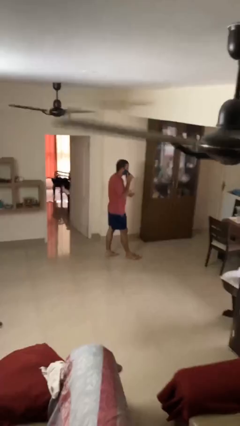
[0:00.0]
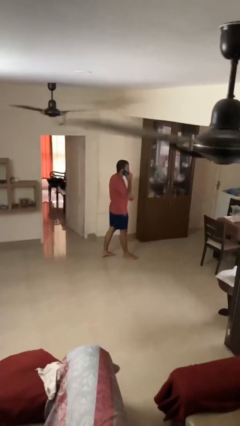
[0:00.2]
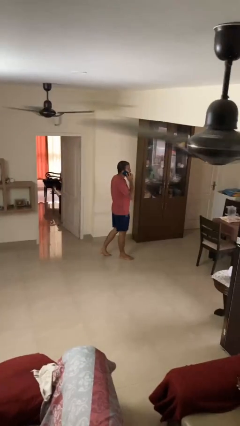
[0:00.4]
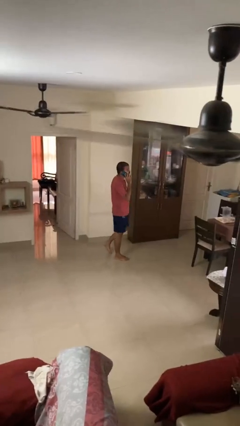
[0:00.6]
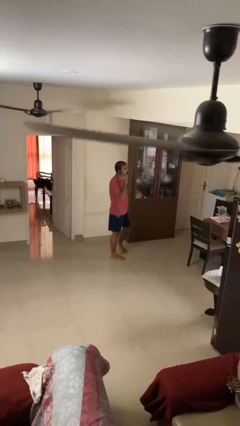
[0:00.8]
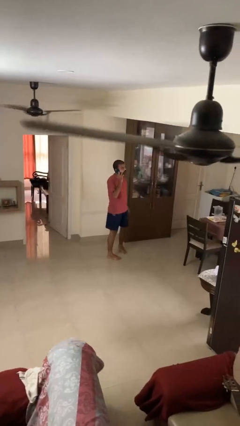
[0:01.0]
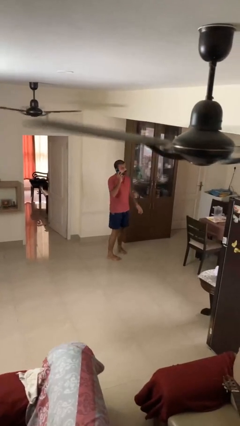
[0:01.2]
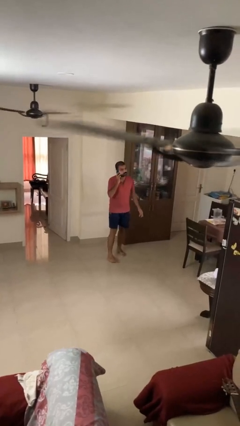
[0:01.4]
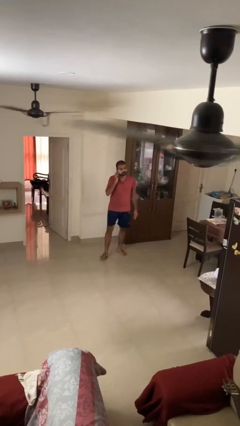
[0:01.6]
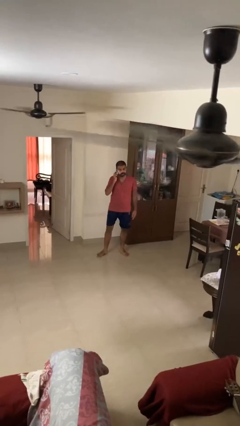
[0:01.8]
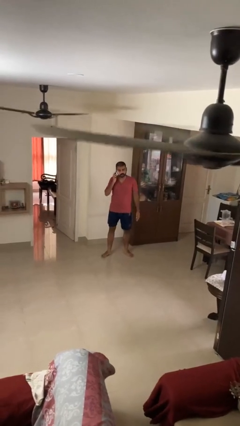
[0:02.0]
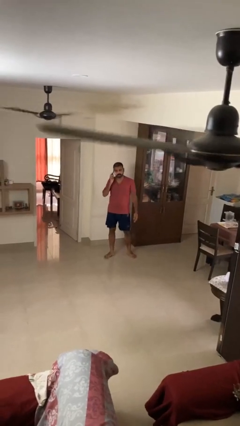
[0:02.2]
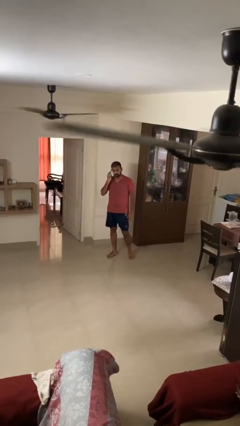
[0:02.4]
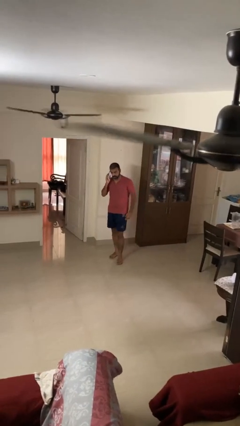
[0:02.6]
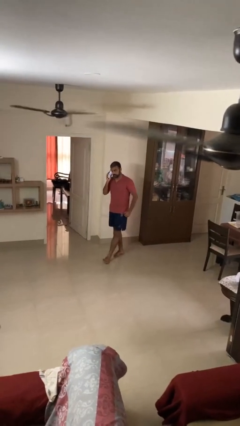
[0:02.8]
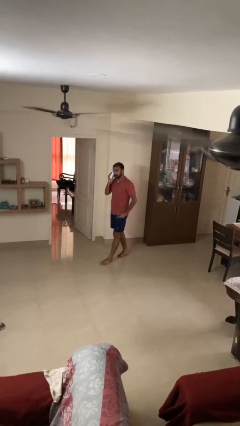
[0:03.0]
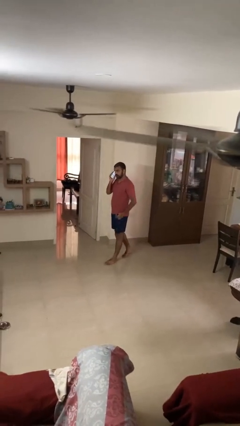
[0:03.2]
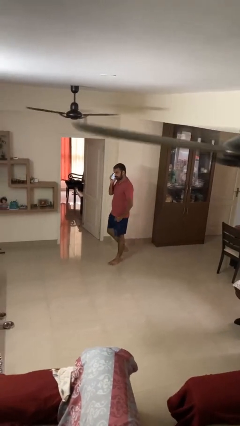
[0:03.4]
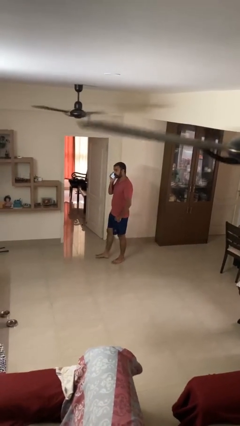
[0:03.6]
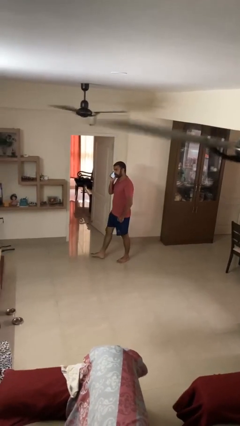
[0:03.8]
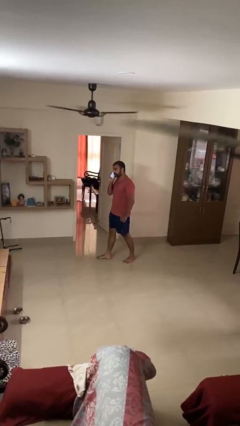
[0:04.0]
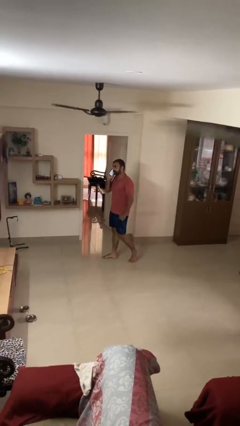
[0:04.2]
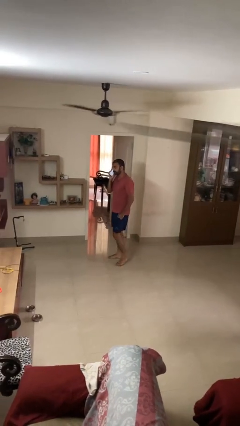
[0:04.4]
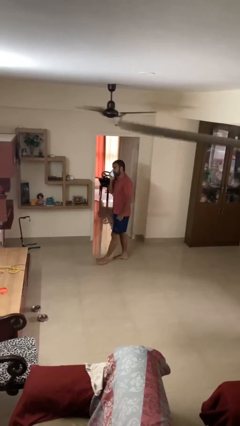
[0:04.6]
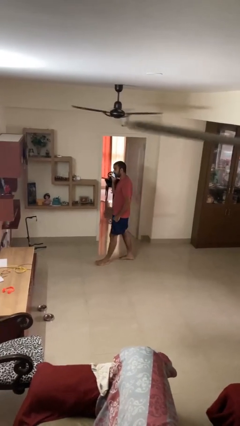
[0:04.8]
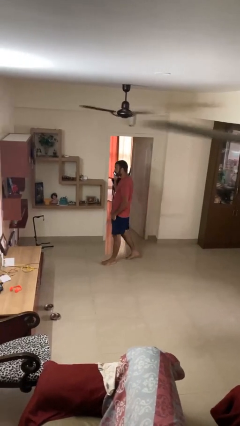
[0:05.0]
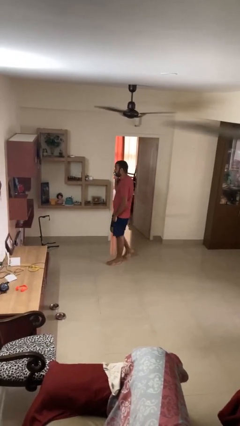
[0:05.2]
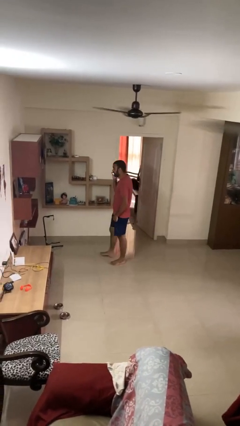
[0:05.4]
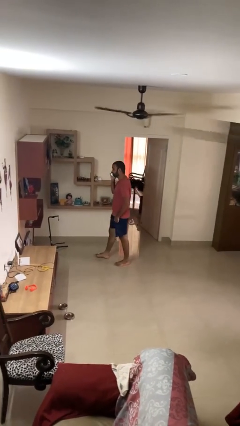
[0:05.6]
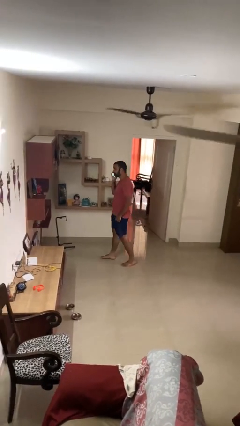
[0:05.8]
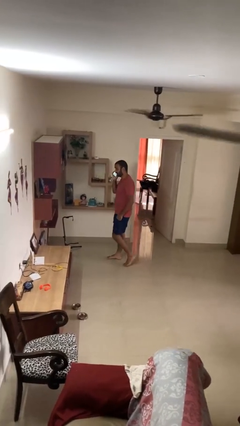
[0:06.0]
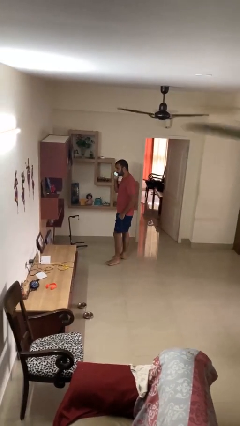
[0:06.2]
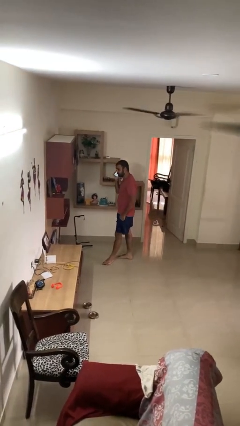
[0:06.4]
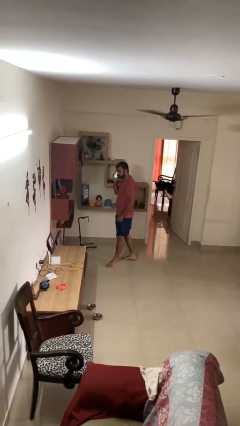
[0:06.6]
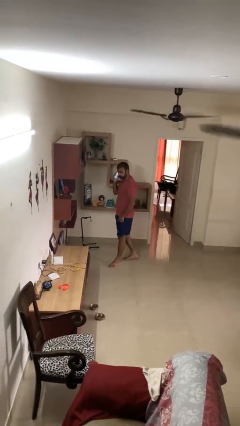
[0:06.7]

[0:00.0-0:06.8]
person talks on phone

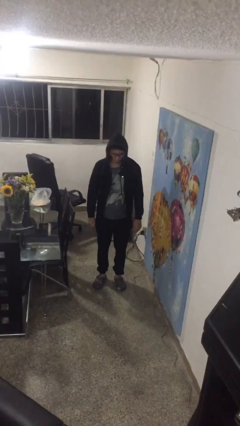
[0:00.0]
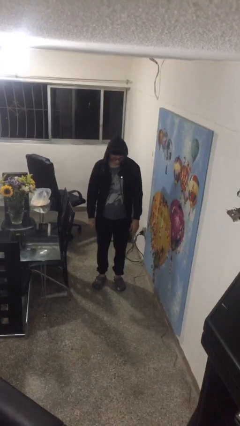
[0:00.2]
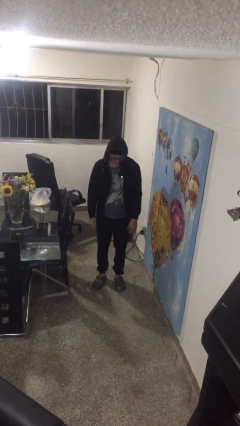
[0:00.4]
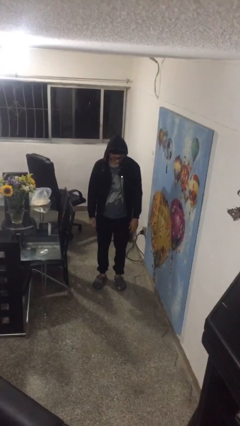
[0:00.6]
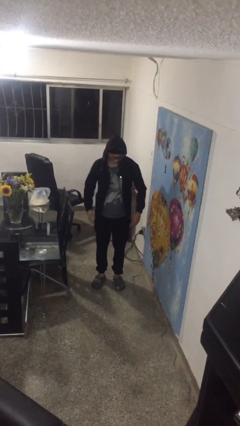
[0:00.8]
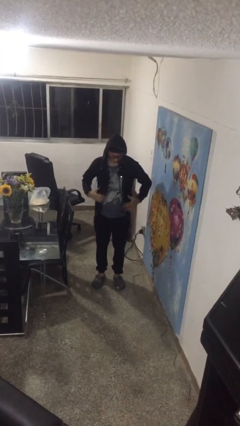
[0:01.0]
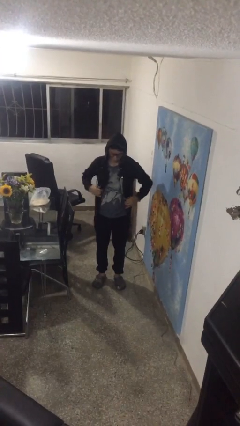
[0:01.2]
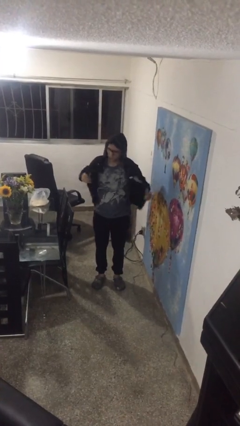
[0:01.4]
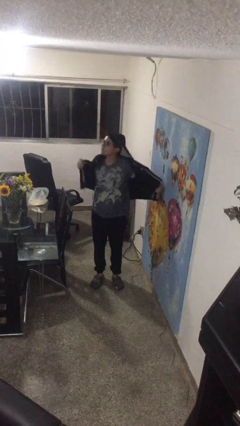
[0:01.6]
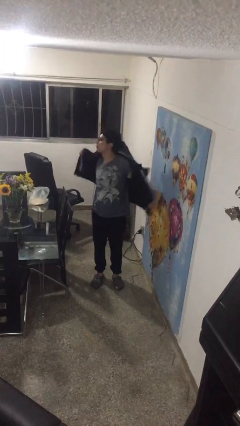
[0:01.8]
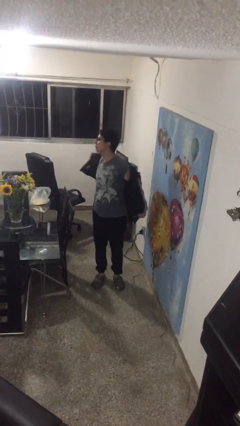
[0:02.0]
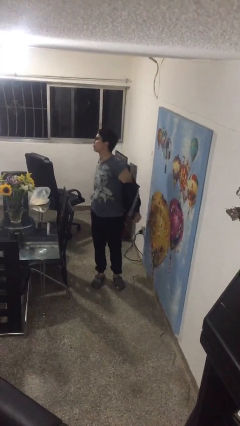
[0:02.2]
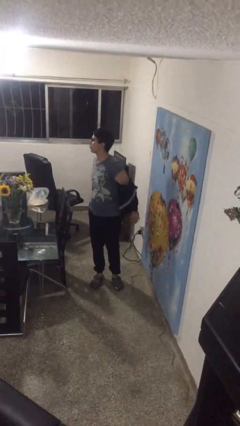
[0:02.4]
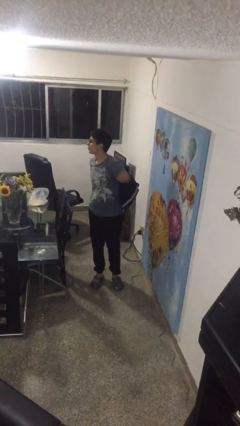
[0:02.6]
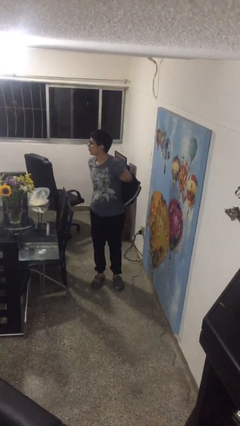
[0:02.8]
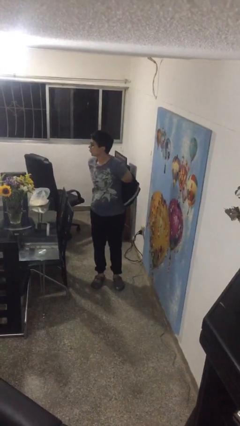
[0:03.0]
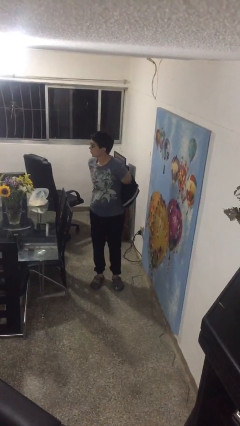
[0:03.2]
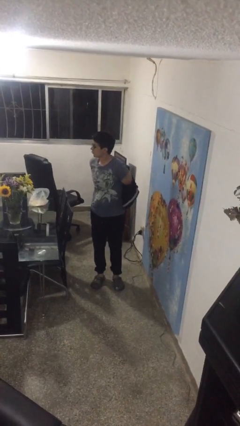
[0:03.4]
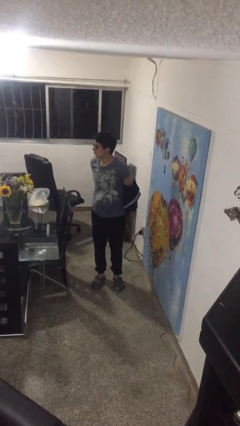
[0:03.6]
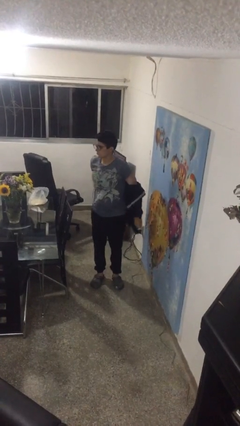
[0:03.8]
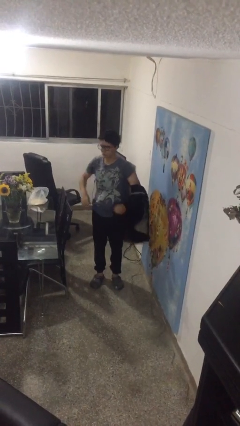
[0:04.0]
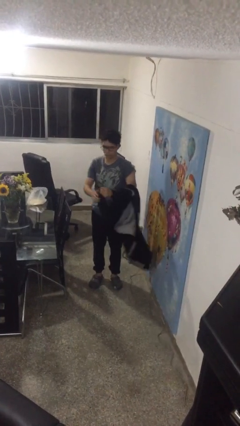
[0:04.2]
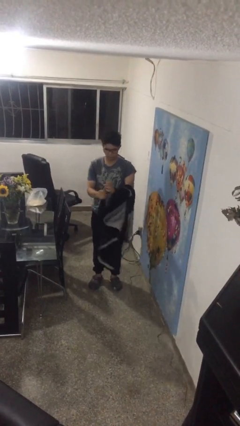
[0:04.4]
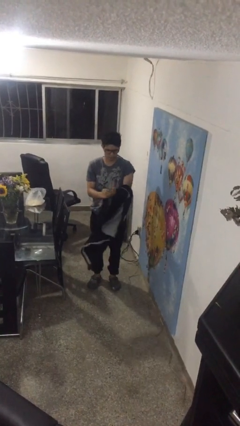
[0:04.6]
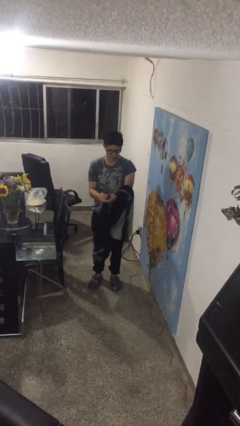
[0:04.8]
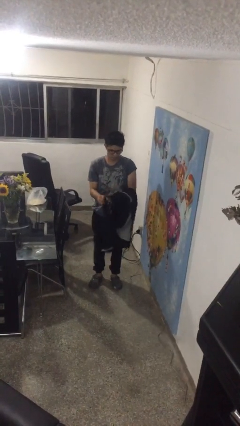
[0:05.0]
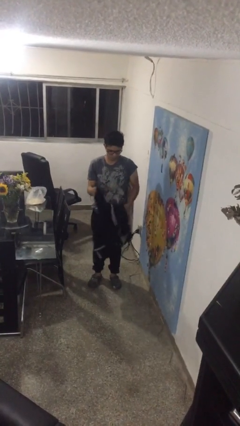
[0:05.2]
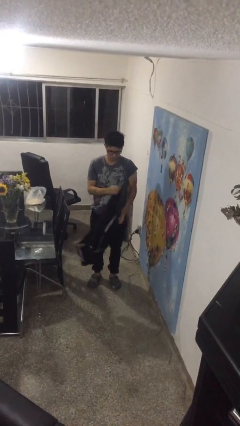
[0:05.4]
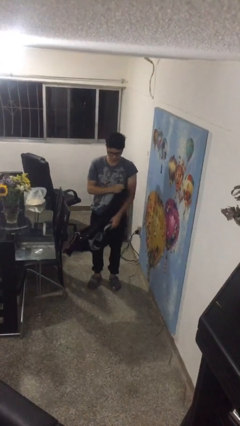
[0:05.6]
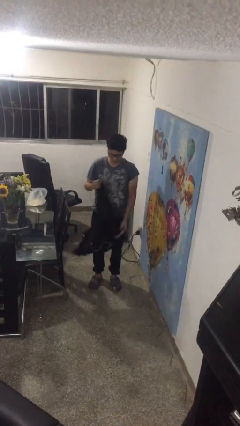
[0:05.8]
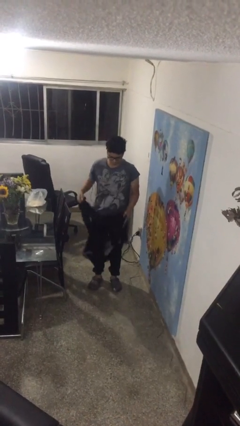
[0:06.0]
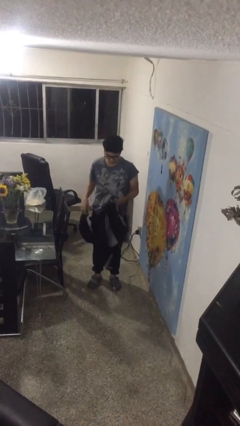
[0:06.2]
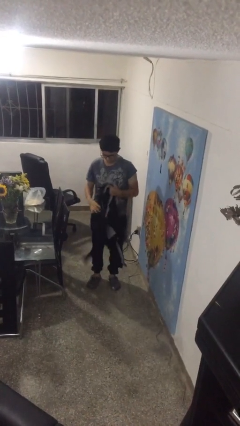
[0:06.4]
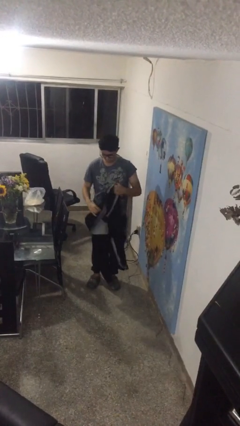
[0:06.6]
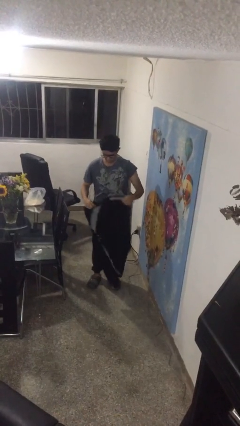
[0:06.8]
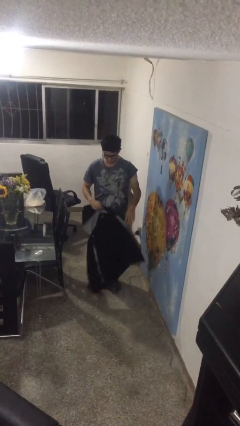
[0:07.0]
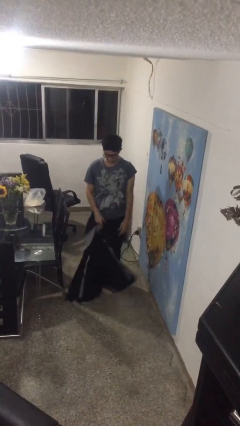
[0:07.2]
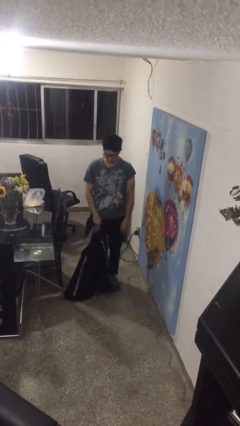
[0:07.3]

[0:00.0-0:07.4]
person takes off hoodie

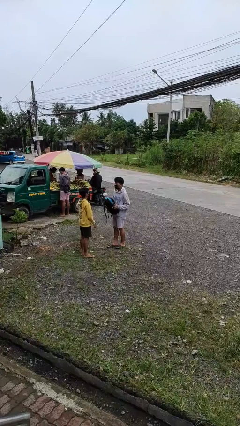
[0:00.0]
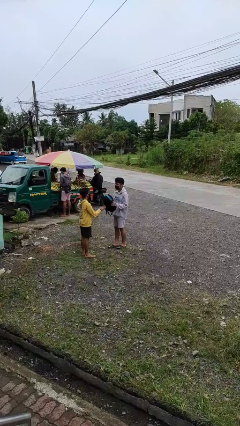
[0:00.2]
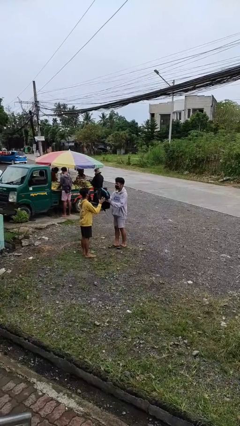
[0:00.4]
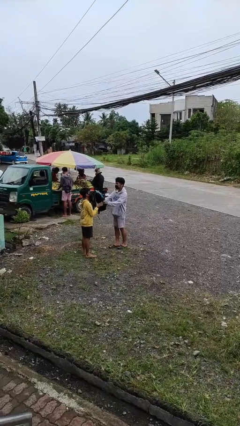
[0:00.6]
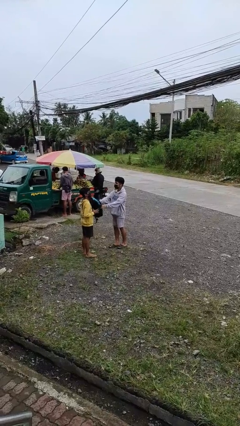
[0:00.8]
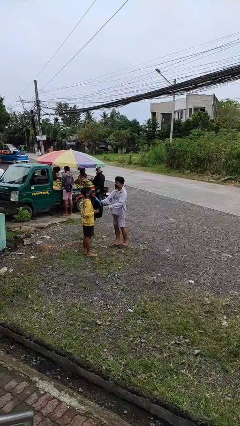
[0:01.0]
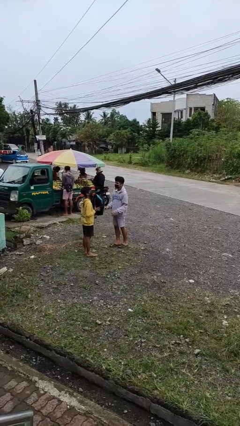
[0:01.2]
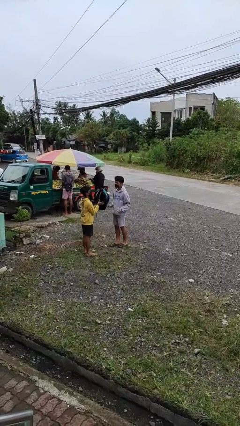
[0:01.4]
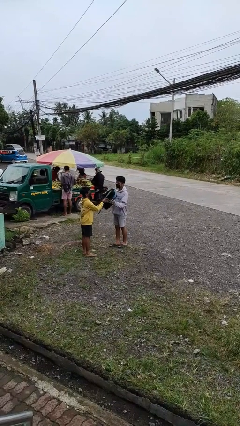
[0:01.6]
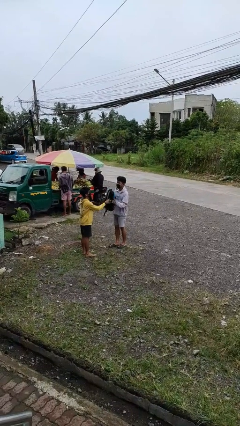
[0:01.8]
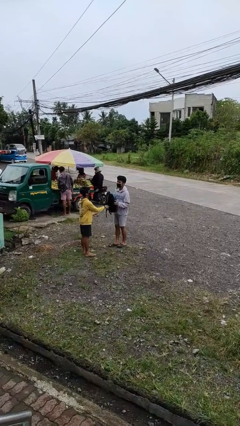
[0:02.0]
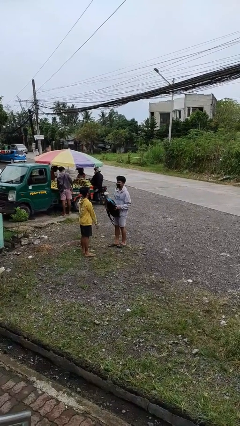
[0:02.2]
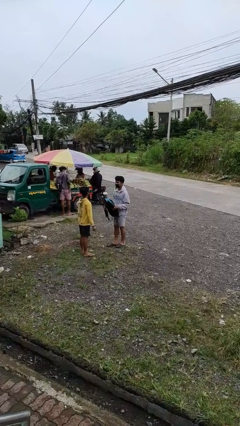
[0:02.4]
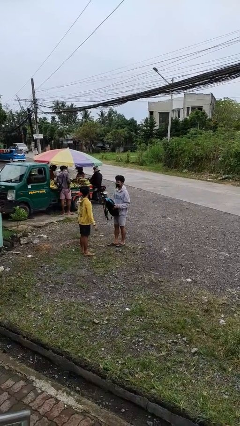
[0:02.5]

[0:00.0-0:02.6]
person transfers object to person

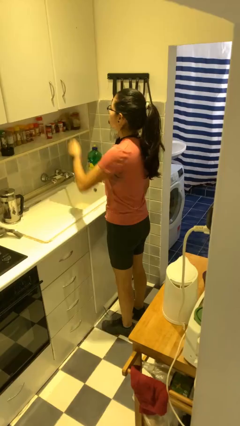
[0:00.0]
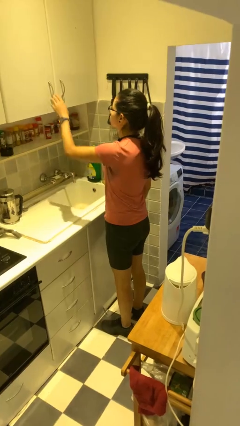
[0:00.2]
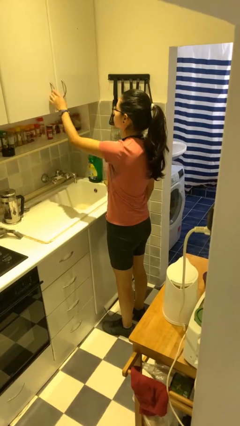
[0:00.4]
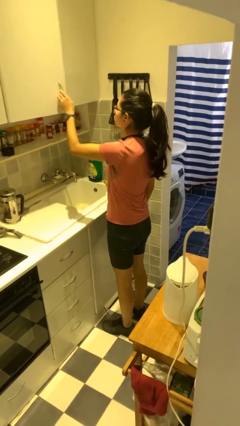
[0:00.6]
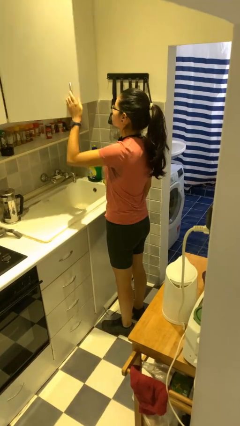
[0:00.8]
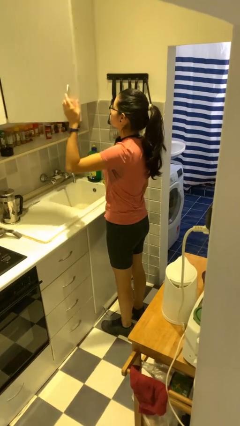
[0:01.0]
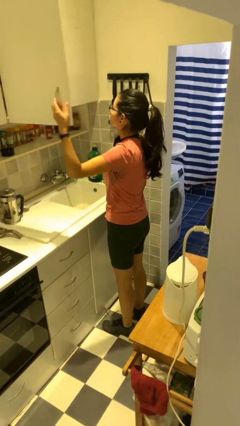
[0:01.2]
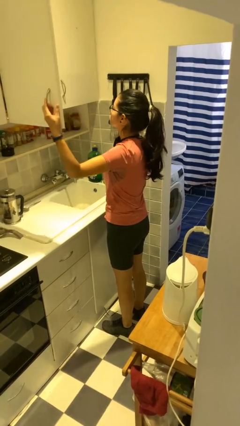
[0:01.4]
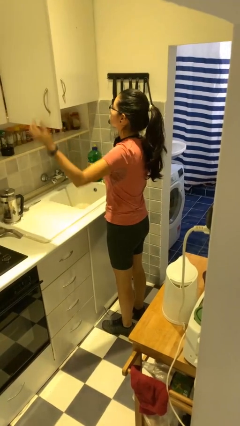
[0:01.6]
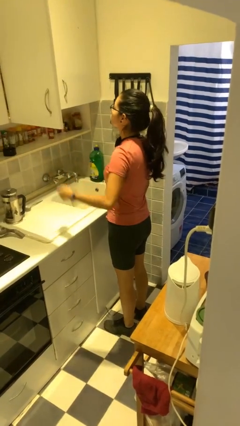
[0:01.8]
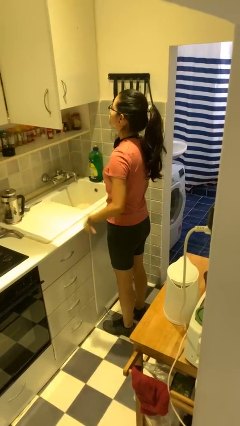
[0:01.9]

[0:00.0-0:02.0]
person opens cabinet
